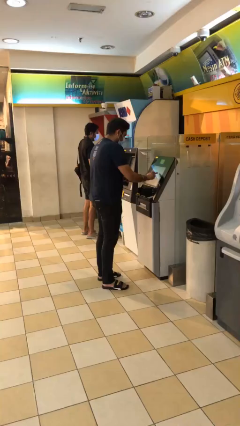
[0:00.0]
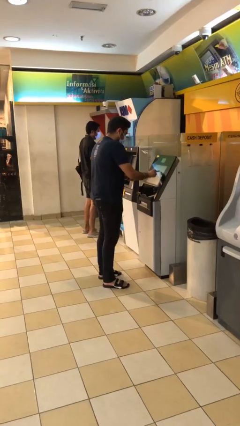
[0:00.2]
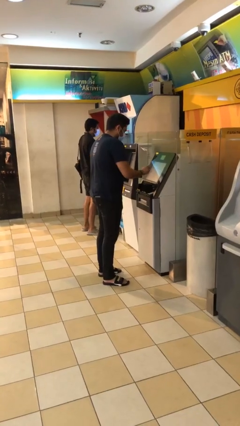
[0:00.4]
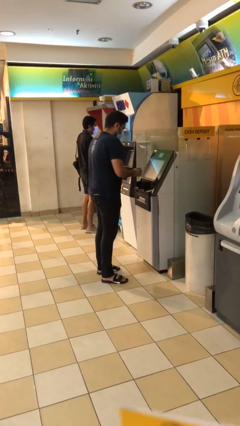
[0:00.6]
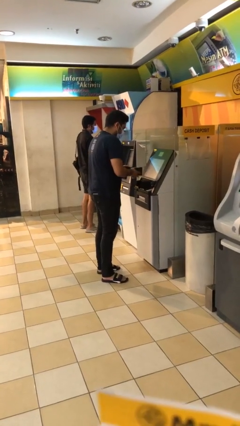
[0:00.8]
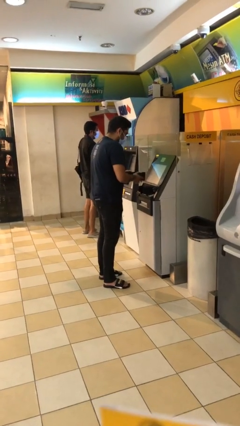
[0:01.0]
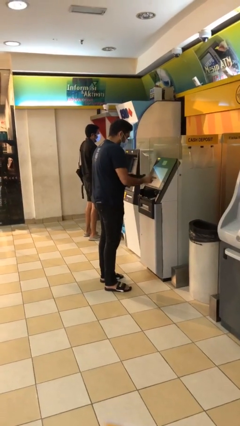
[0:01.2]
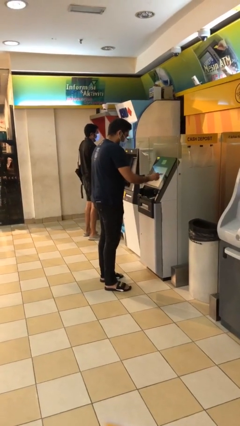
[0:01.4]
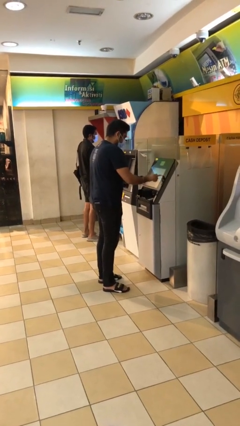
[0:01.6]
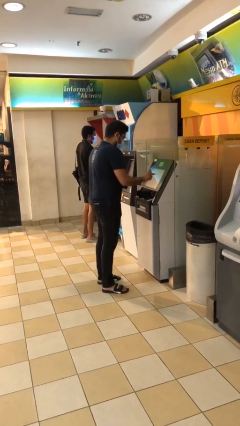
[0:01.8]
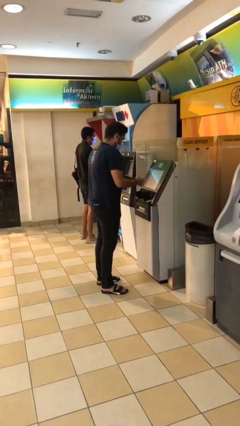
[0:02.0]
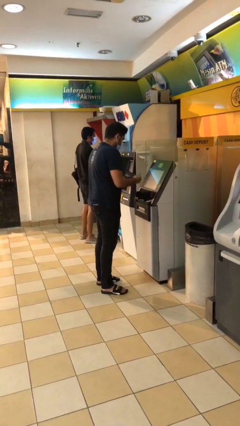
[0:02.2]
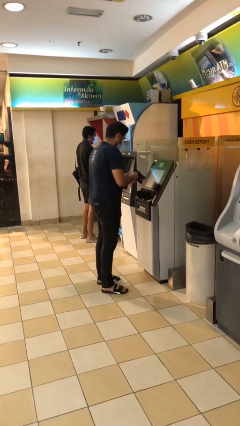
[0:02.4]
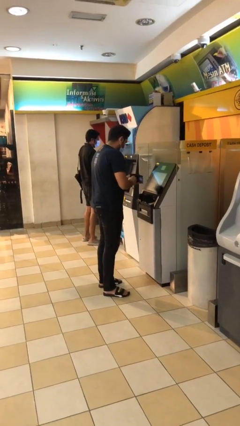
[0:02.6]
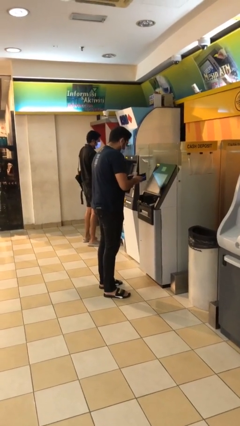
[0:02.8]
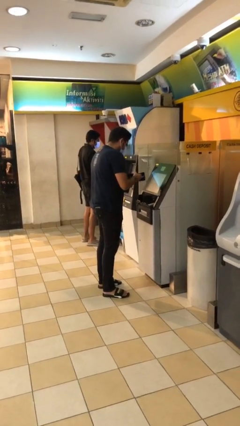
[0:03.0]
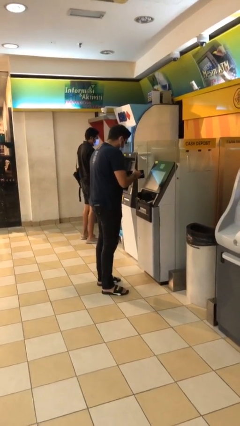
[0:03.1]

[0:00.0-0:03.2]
person purchases from machine

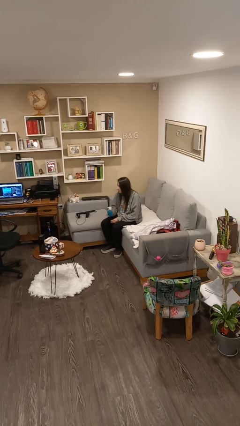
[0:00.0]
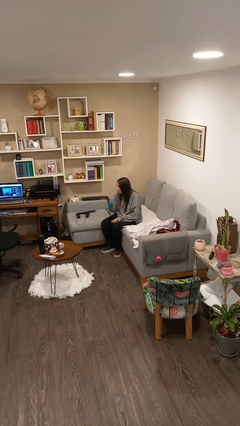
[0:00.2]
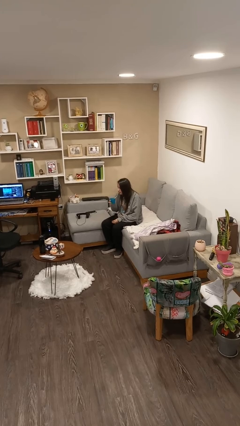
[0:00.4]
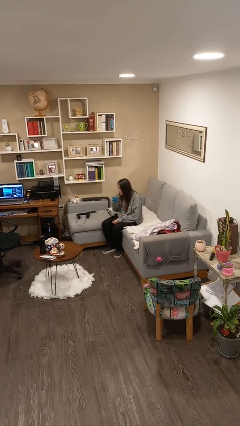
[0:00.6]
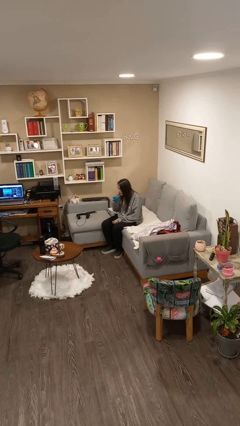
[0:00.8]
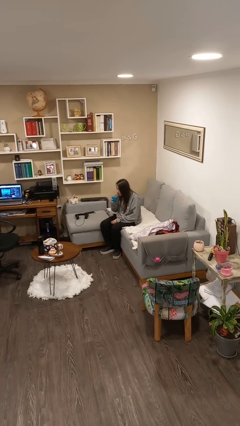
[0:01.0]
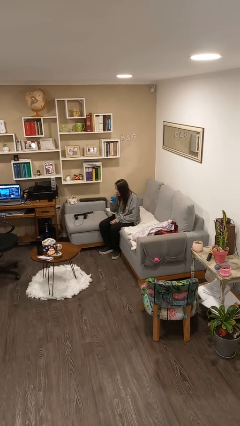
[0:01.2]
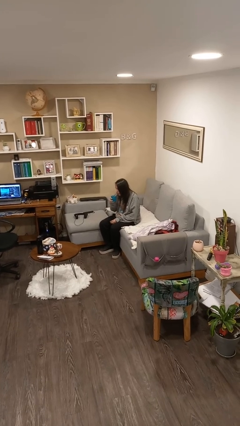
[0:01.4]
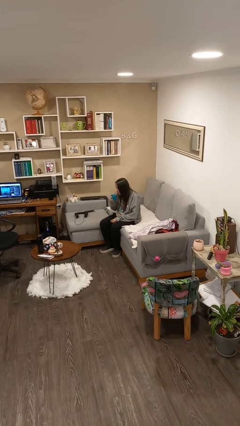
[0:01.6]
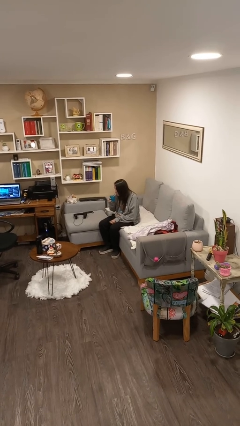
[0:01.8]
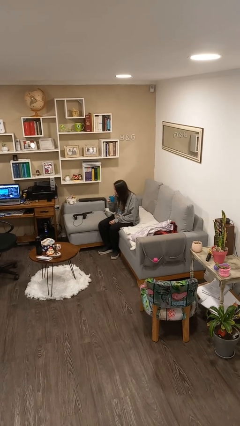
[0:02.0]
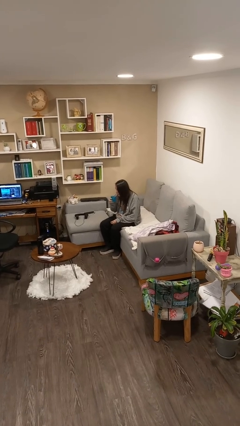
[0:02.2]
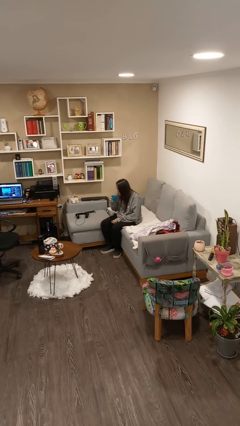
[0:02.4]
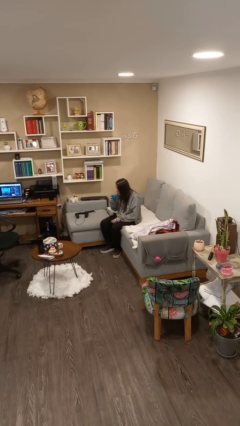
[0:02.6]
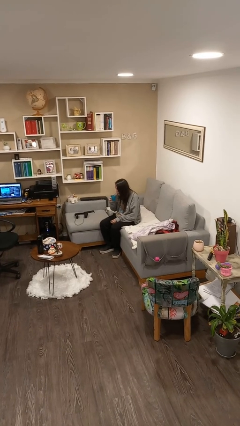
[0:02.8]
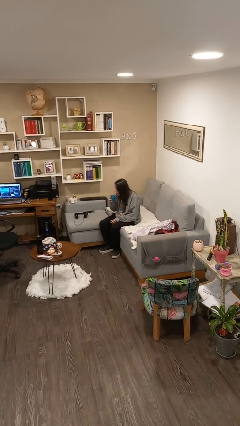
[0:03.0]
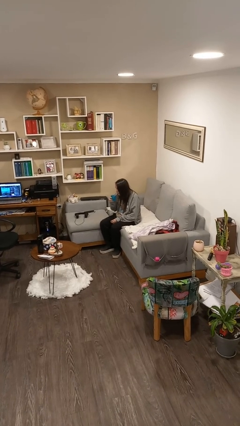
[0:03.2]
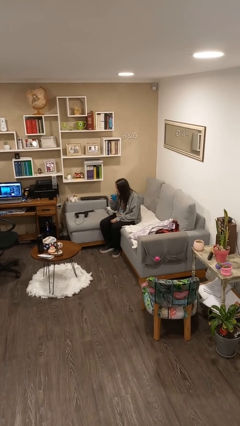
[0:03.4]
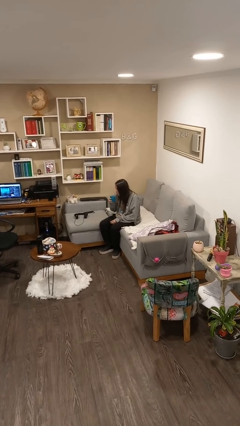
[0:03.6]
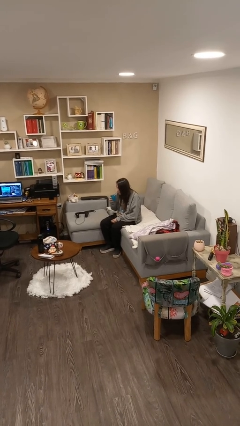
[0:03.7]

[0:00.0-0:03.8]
person drinks from straw

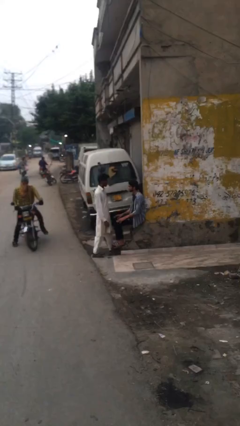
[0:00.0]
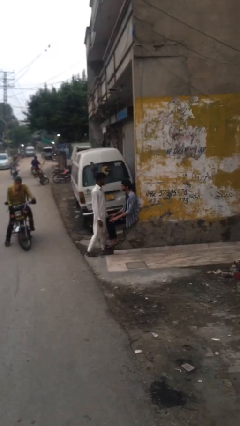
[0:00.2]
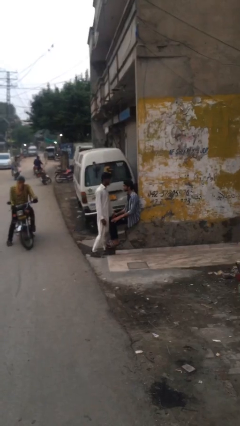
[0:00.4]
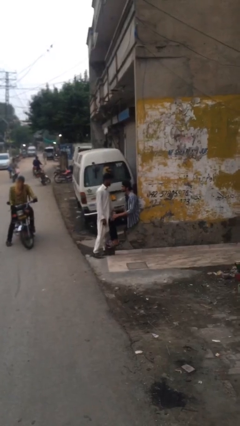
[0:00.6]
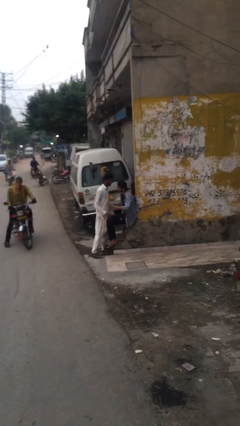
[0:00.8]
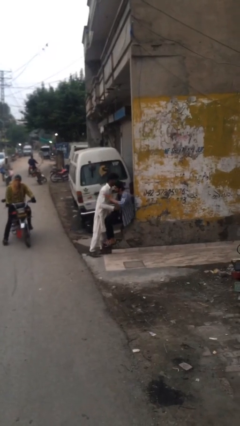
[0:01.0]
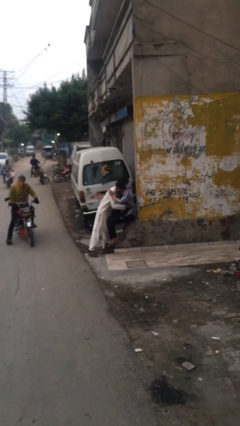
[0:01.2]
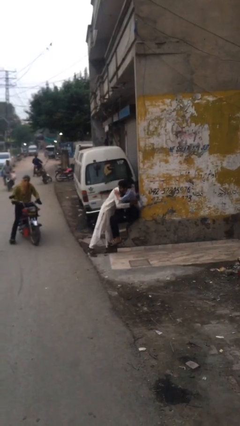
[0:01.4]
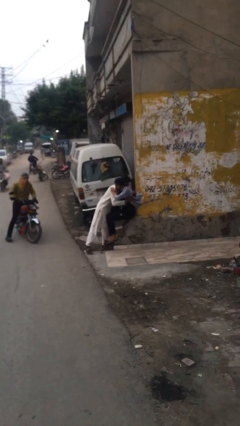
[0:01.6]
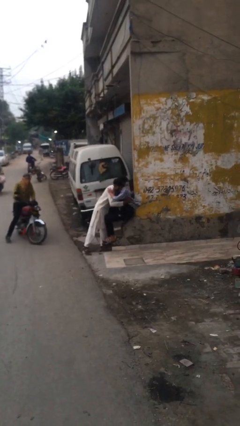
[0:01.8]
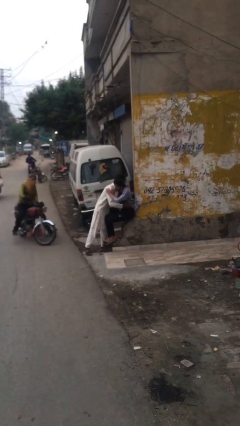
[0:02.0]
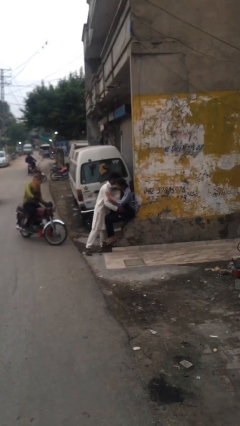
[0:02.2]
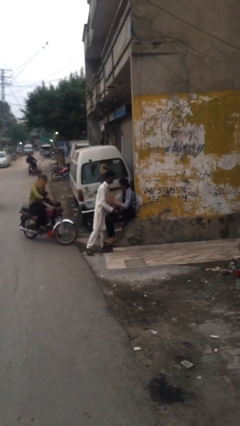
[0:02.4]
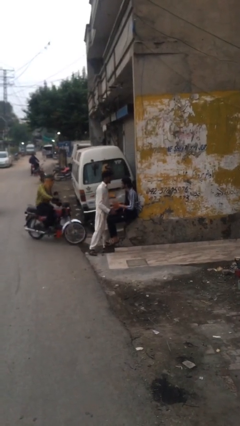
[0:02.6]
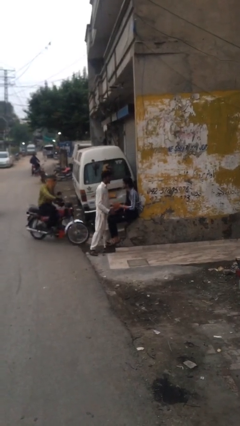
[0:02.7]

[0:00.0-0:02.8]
person embraces person

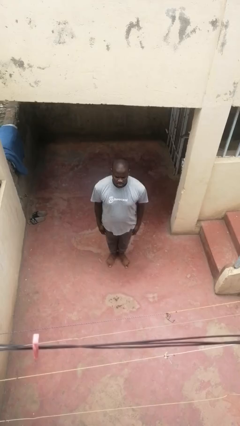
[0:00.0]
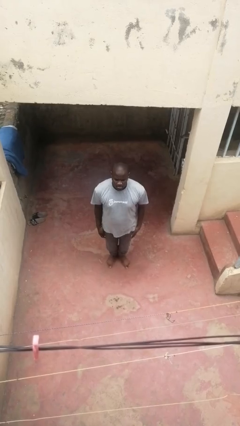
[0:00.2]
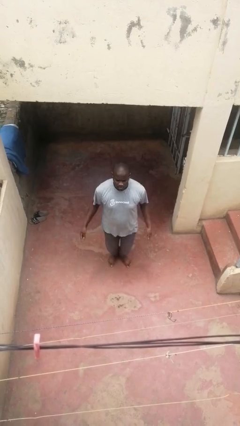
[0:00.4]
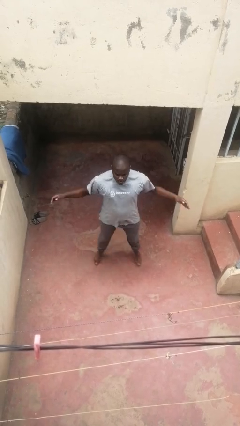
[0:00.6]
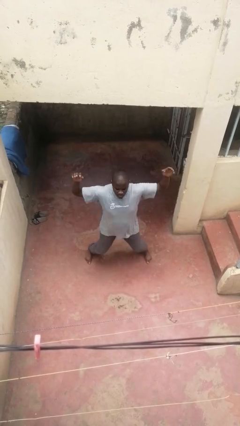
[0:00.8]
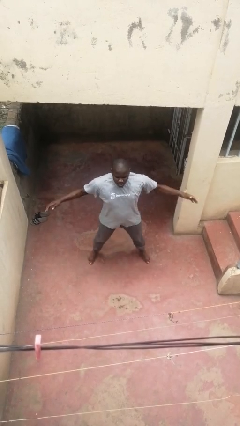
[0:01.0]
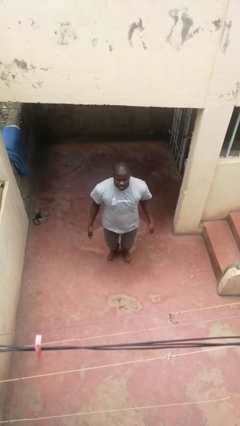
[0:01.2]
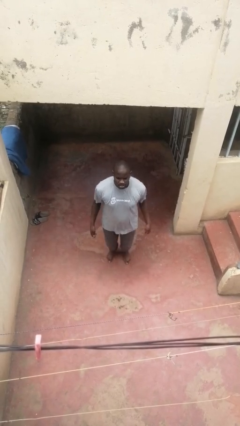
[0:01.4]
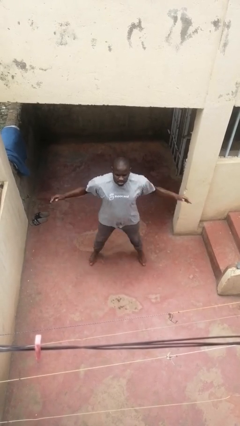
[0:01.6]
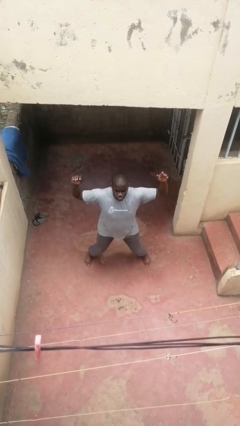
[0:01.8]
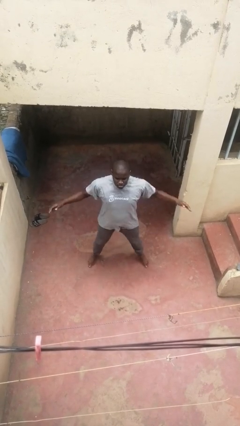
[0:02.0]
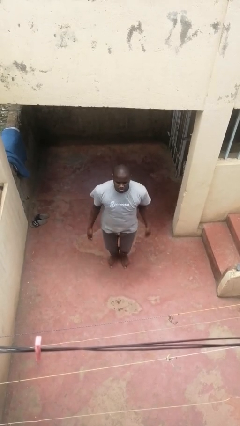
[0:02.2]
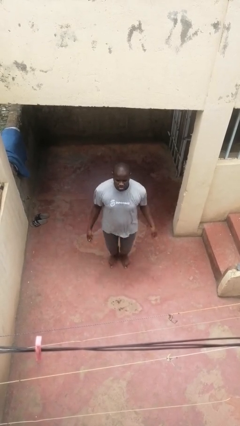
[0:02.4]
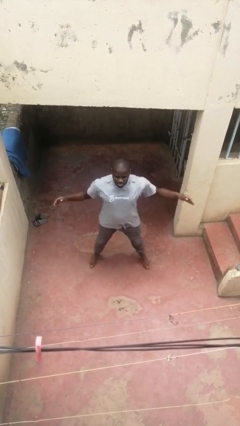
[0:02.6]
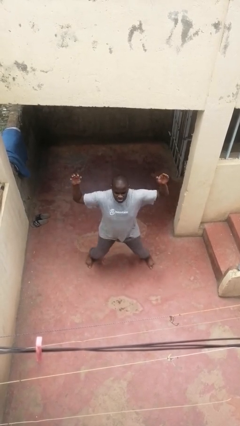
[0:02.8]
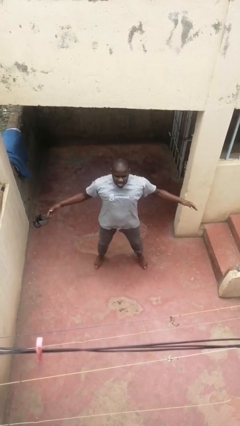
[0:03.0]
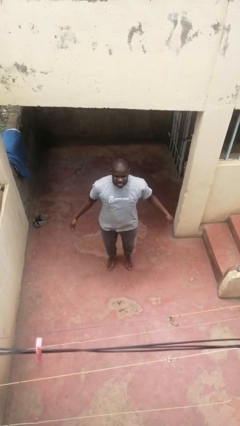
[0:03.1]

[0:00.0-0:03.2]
person exercises with jumping jacks

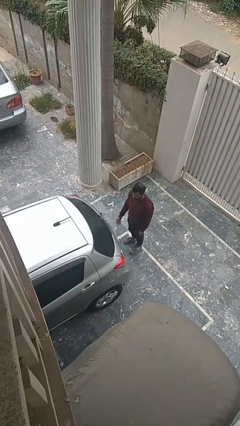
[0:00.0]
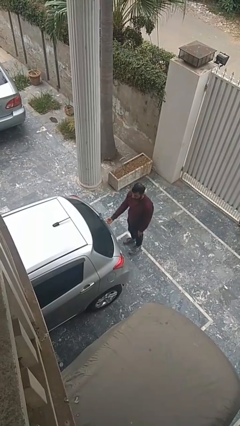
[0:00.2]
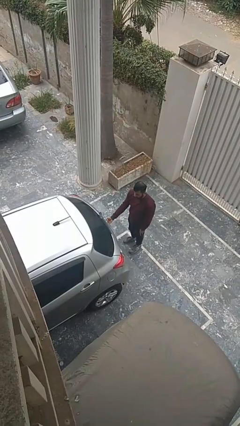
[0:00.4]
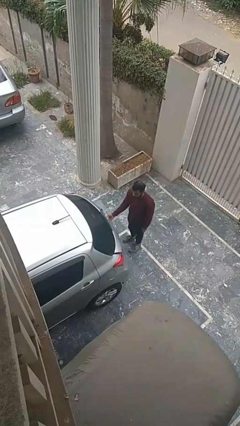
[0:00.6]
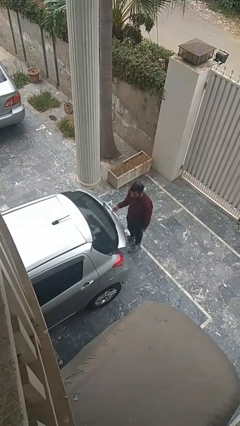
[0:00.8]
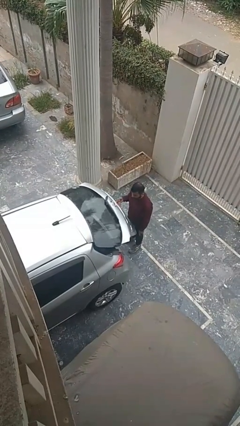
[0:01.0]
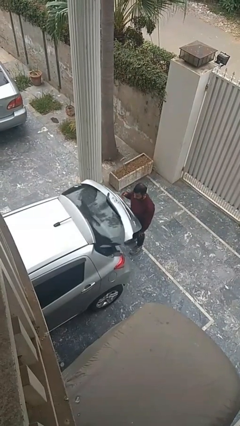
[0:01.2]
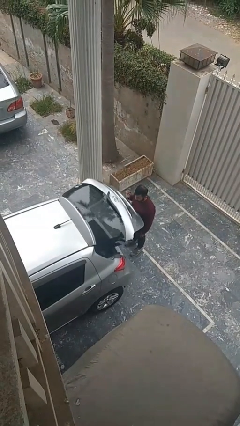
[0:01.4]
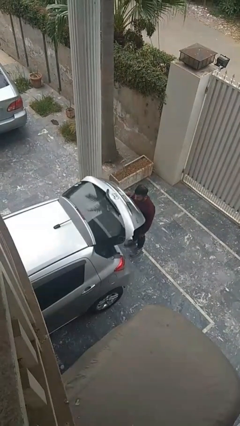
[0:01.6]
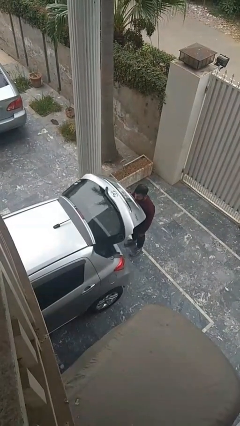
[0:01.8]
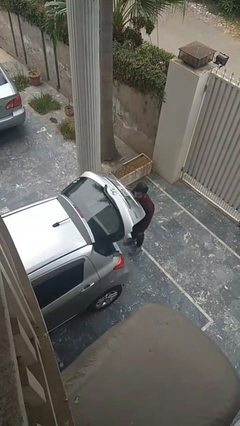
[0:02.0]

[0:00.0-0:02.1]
person opens car trunk

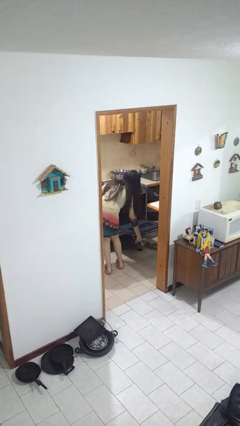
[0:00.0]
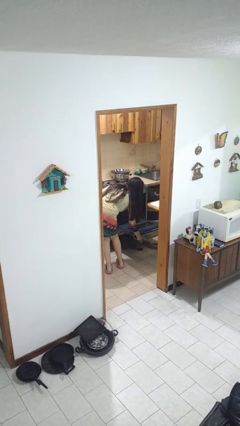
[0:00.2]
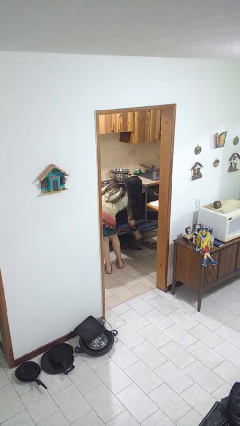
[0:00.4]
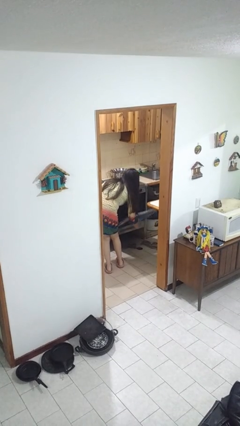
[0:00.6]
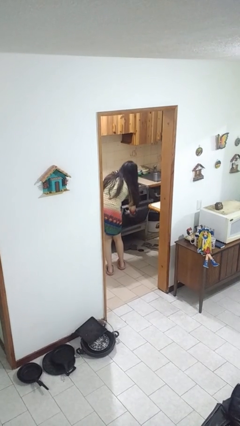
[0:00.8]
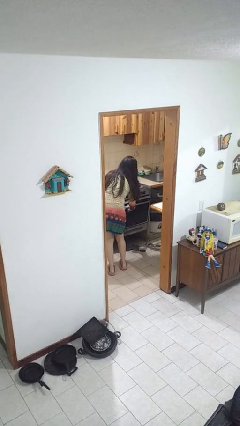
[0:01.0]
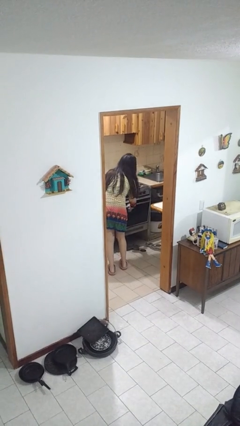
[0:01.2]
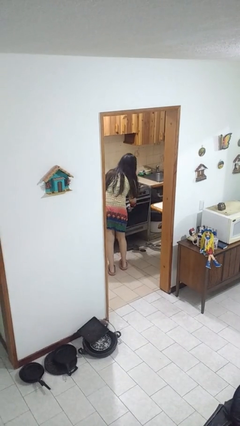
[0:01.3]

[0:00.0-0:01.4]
person closes oven door

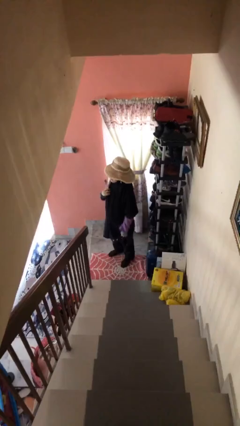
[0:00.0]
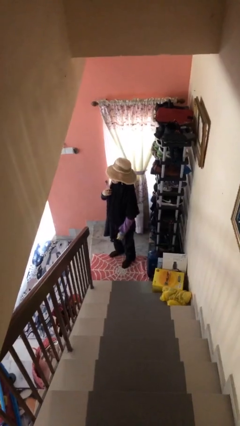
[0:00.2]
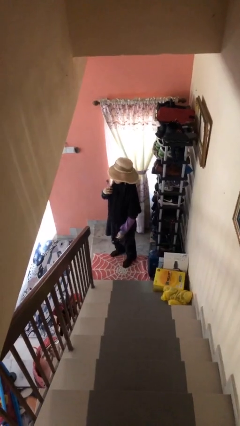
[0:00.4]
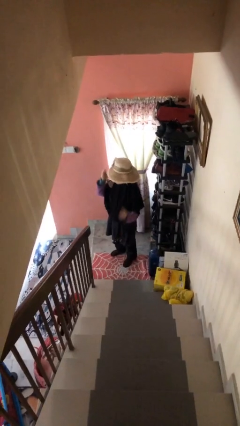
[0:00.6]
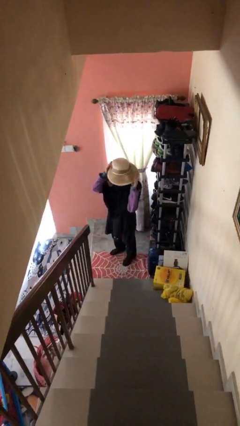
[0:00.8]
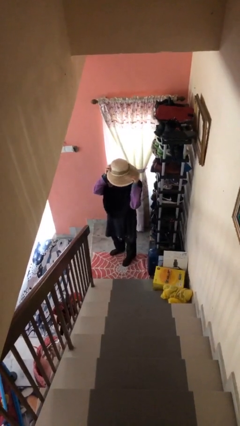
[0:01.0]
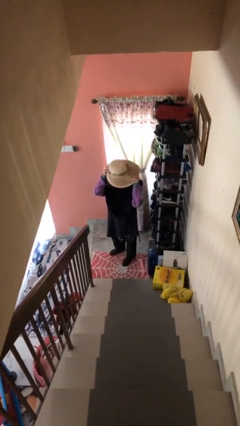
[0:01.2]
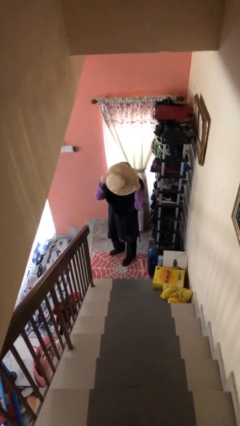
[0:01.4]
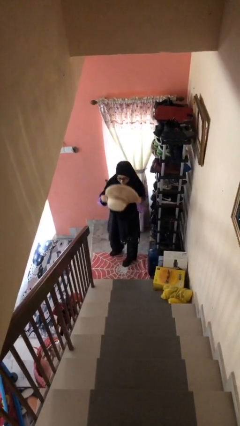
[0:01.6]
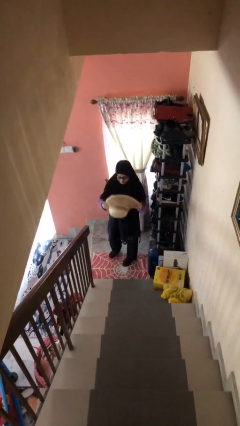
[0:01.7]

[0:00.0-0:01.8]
person takes off hat
